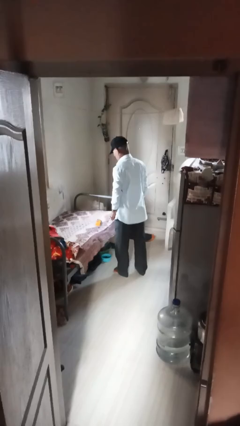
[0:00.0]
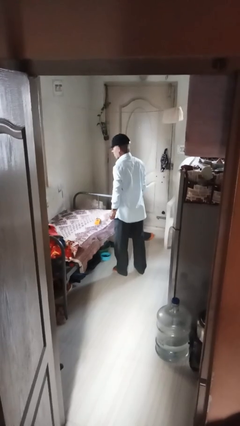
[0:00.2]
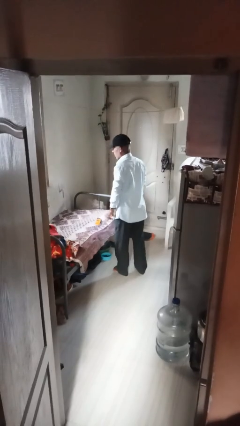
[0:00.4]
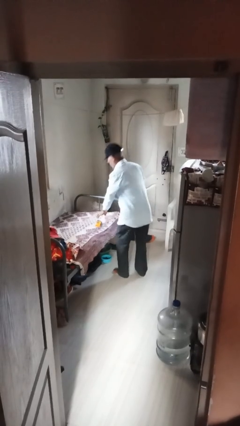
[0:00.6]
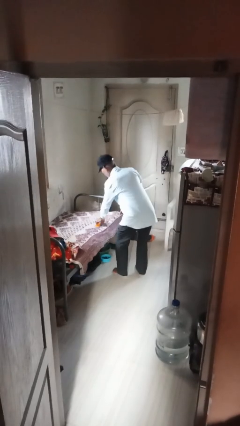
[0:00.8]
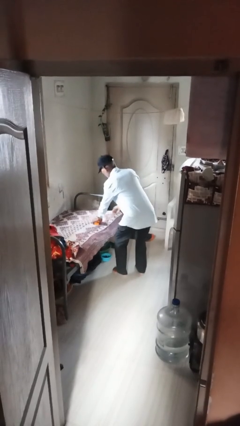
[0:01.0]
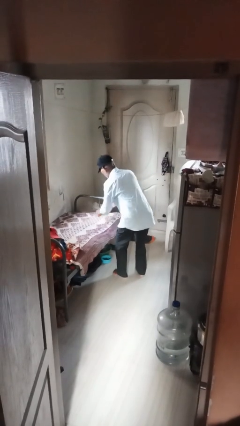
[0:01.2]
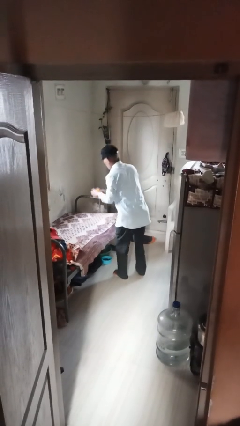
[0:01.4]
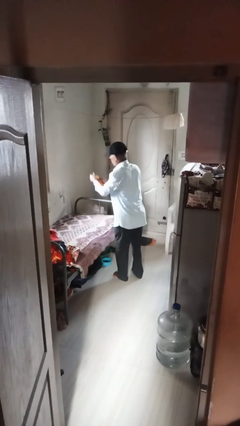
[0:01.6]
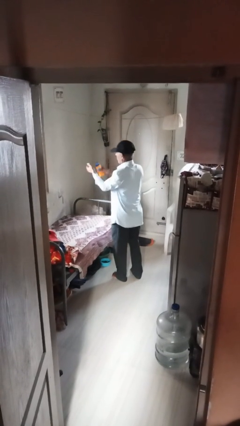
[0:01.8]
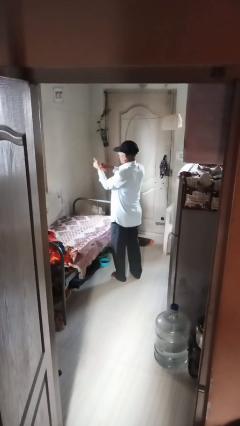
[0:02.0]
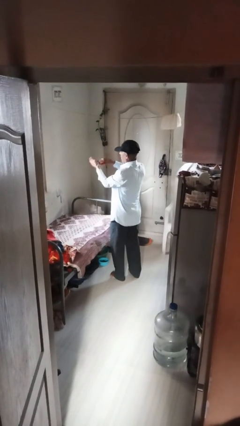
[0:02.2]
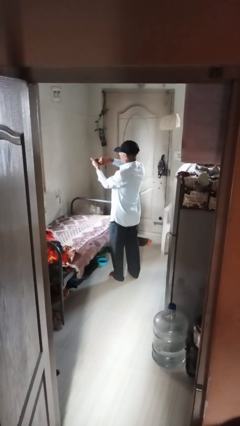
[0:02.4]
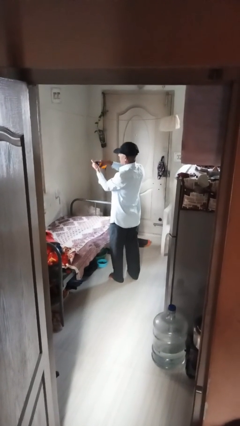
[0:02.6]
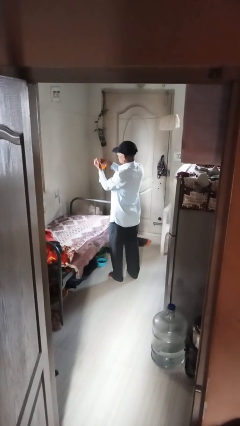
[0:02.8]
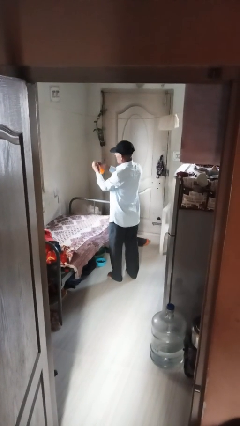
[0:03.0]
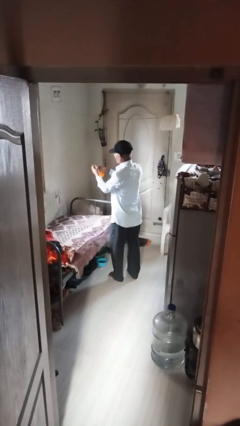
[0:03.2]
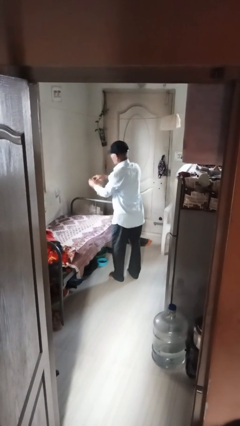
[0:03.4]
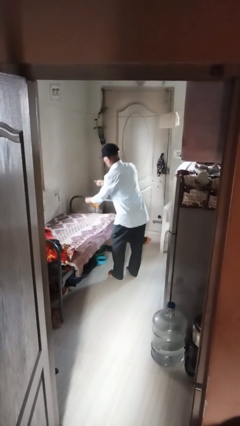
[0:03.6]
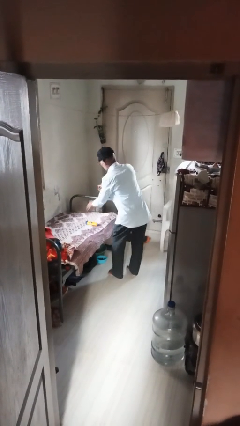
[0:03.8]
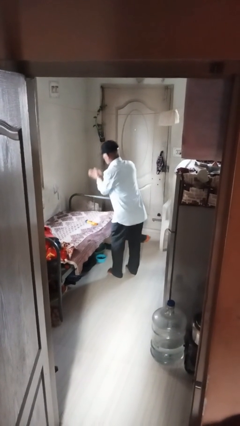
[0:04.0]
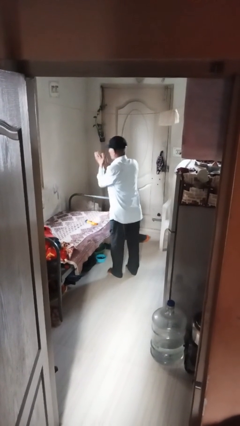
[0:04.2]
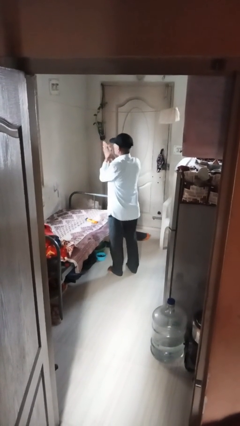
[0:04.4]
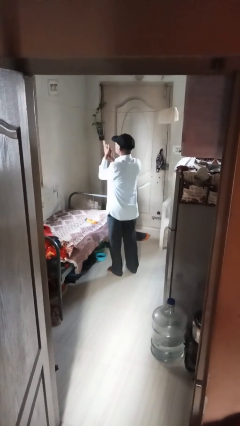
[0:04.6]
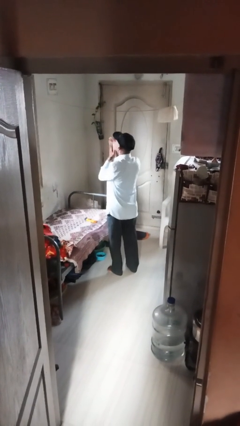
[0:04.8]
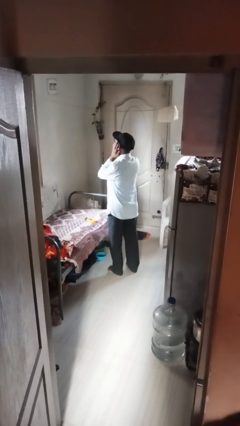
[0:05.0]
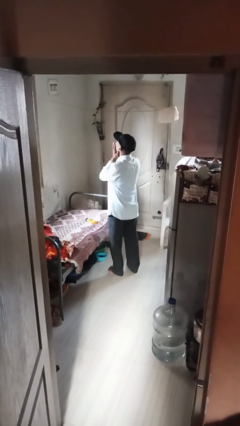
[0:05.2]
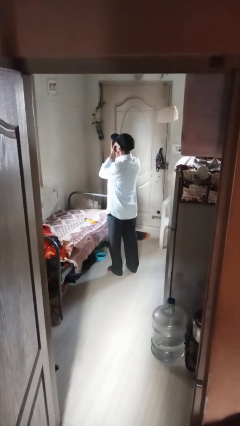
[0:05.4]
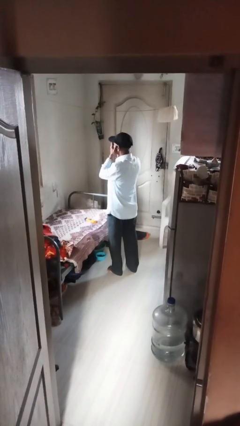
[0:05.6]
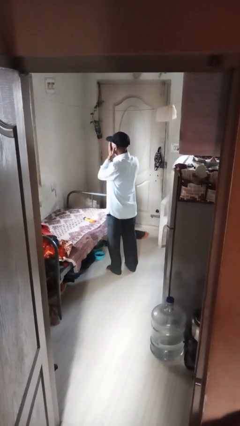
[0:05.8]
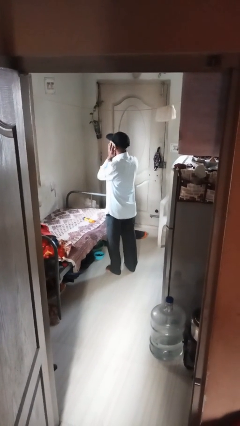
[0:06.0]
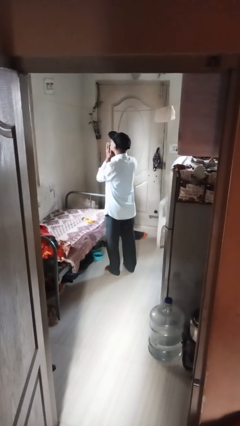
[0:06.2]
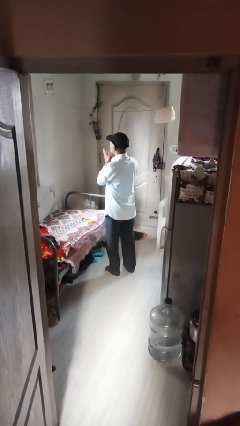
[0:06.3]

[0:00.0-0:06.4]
person applies sunscreen

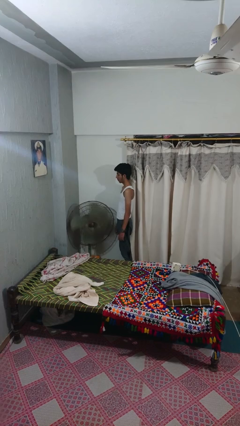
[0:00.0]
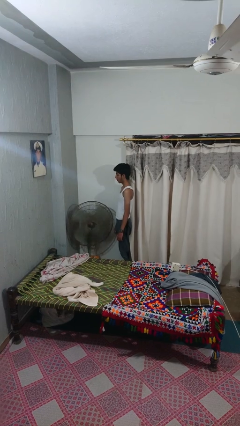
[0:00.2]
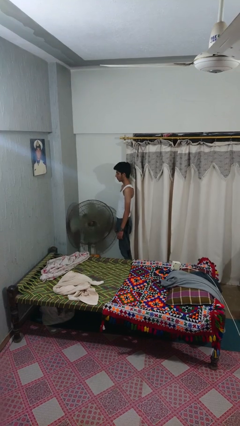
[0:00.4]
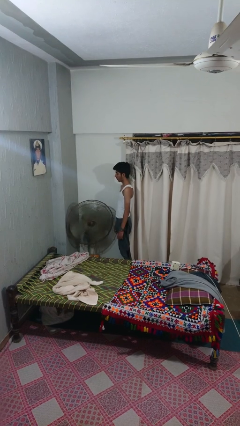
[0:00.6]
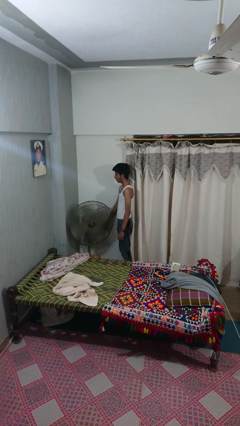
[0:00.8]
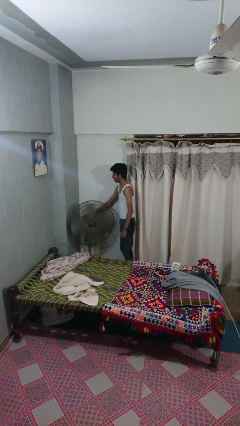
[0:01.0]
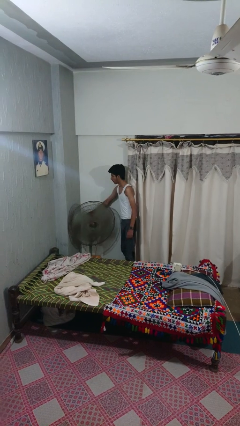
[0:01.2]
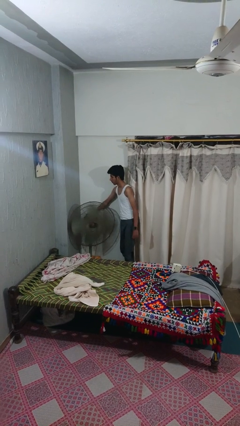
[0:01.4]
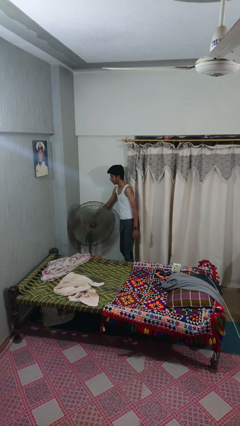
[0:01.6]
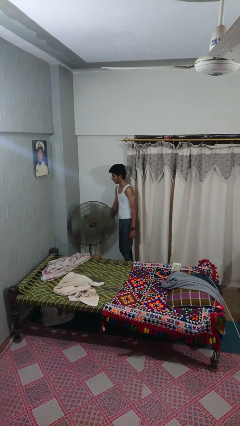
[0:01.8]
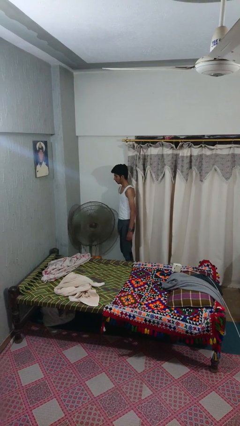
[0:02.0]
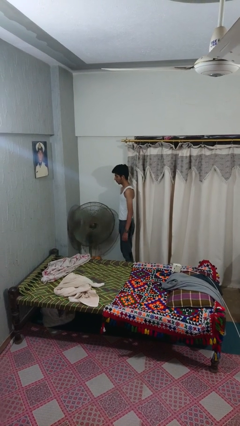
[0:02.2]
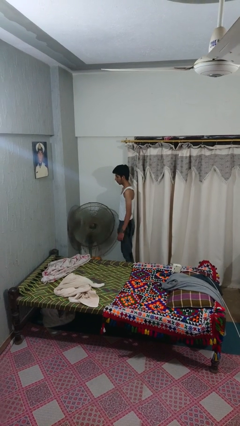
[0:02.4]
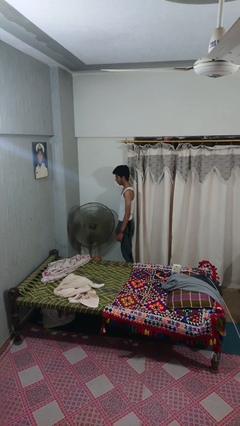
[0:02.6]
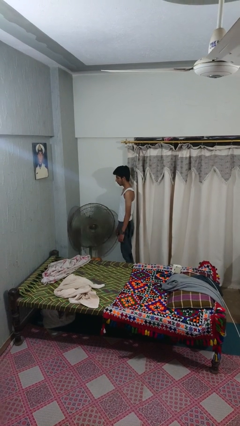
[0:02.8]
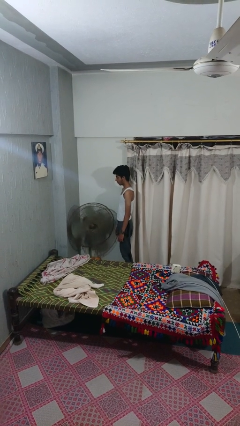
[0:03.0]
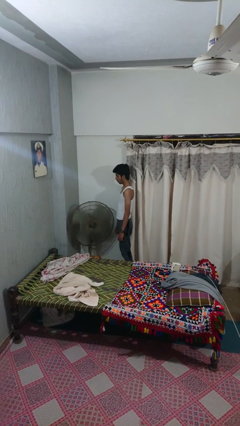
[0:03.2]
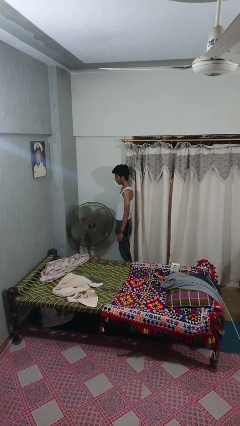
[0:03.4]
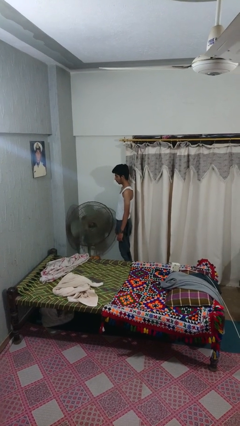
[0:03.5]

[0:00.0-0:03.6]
person turns off fan

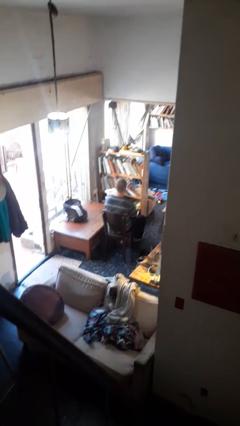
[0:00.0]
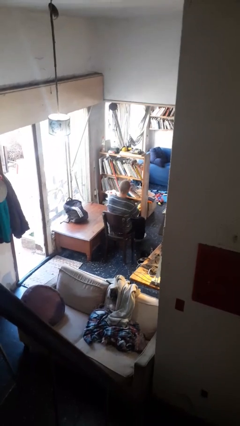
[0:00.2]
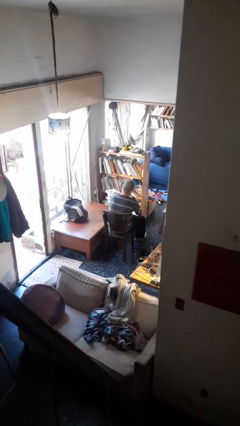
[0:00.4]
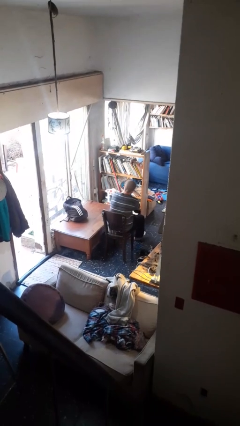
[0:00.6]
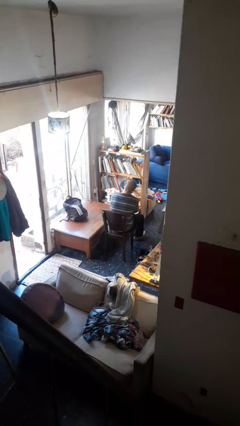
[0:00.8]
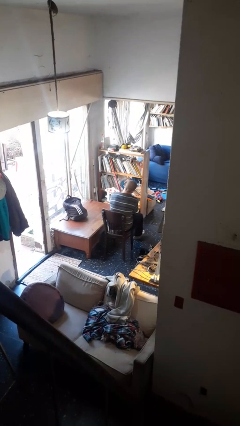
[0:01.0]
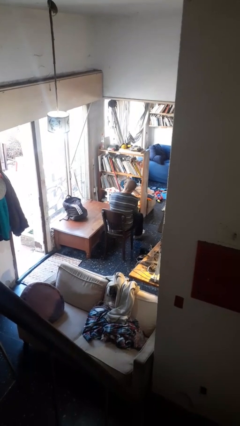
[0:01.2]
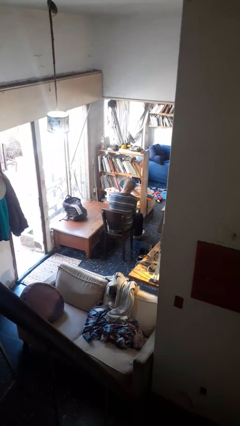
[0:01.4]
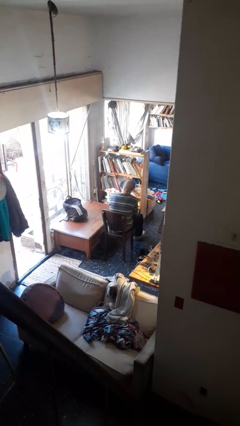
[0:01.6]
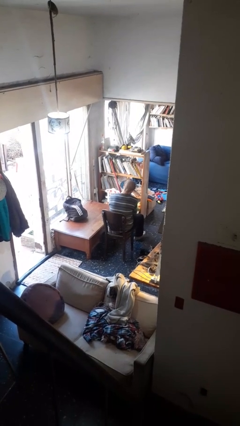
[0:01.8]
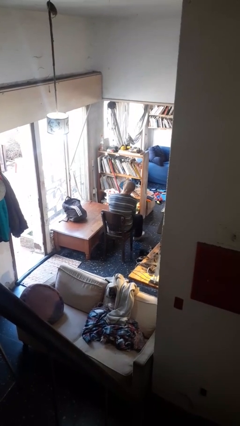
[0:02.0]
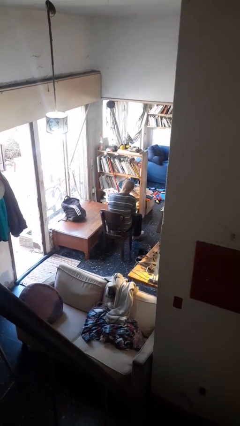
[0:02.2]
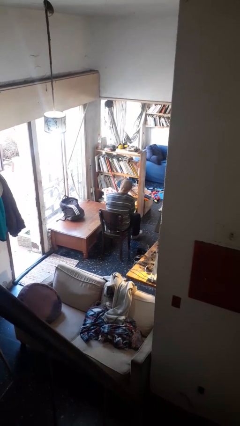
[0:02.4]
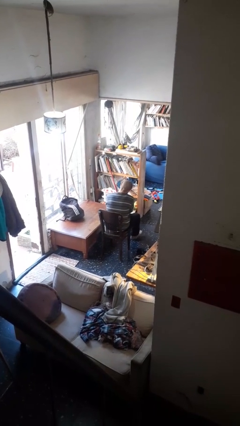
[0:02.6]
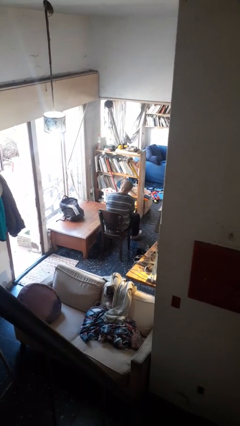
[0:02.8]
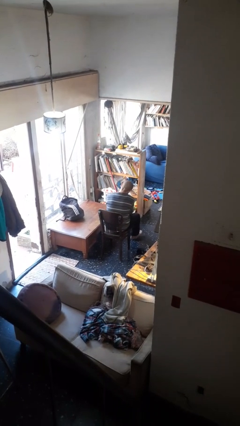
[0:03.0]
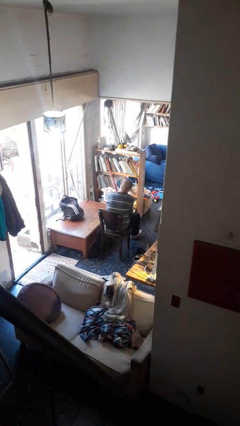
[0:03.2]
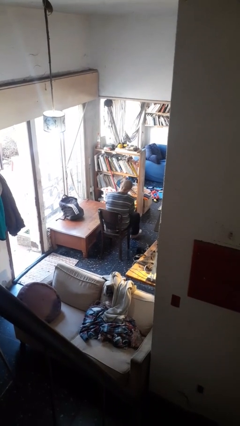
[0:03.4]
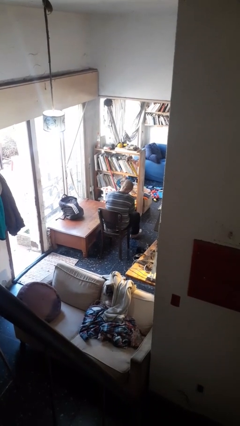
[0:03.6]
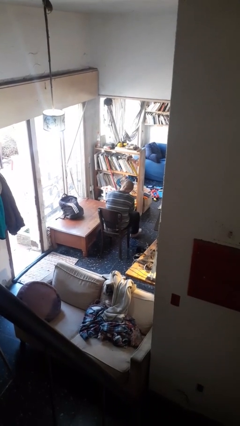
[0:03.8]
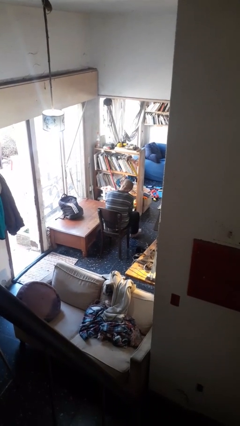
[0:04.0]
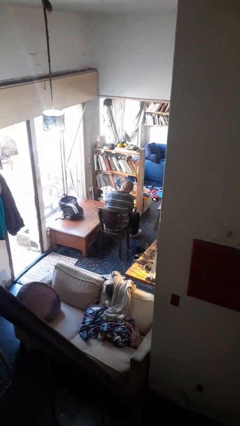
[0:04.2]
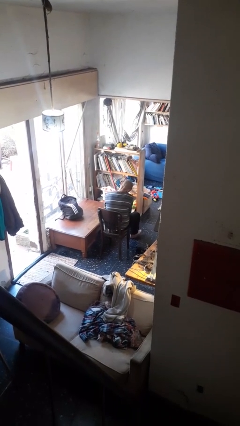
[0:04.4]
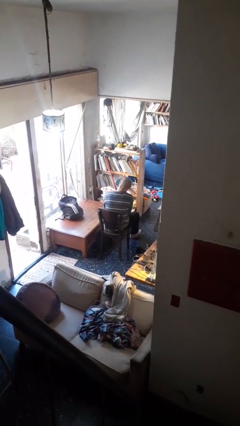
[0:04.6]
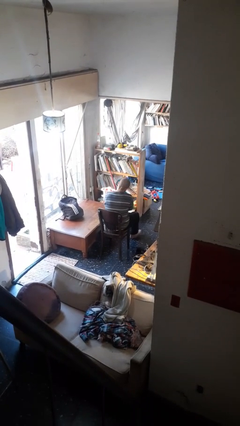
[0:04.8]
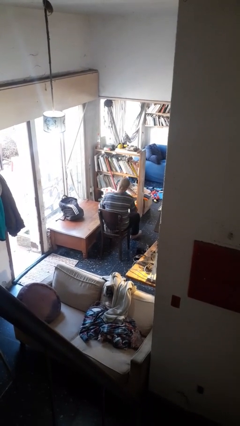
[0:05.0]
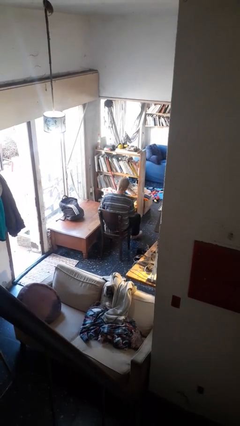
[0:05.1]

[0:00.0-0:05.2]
person puts on socks

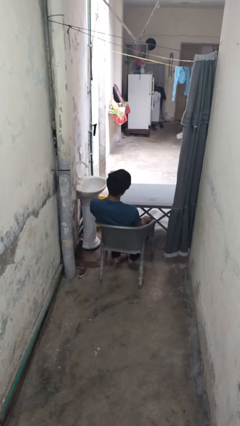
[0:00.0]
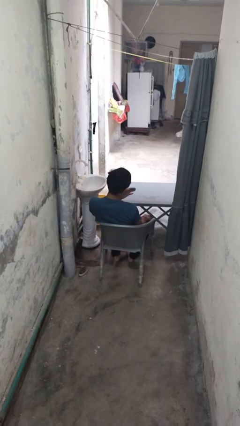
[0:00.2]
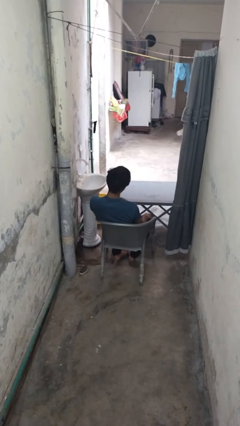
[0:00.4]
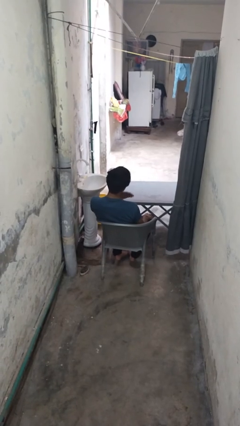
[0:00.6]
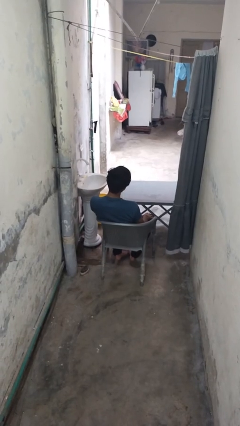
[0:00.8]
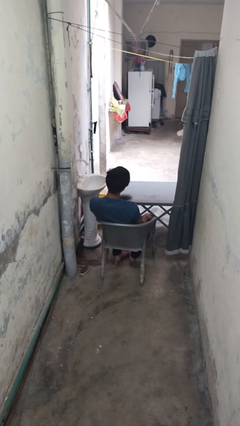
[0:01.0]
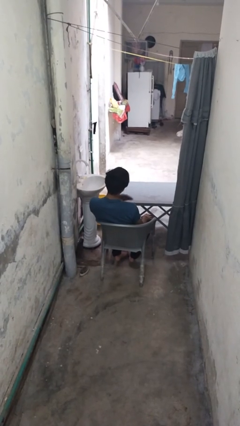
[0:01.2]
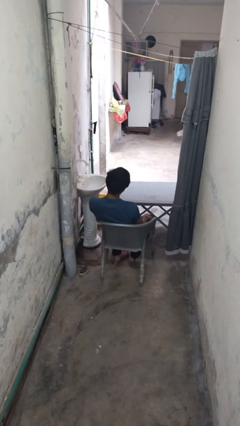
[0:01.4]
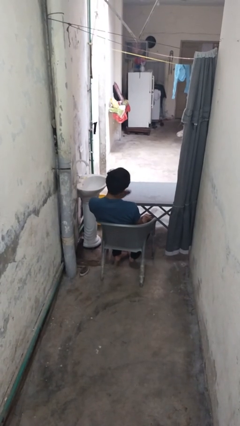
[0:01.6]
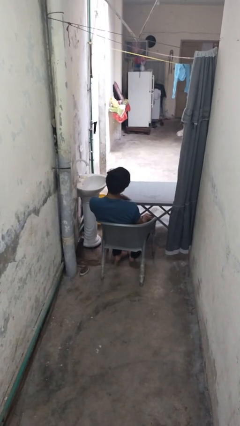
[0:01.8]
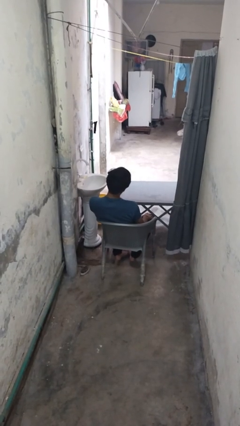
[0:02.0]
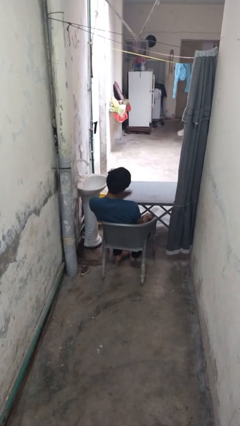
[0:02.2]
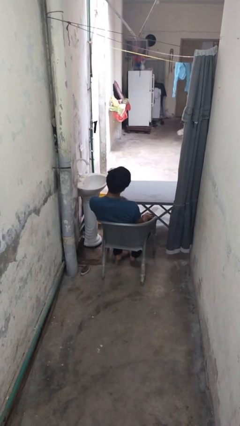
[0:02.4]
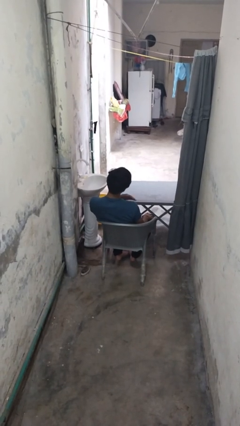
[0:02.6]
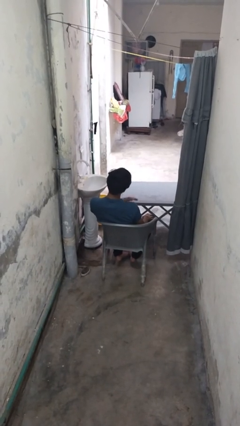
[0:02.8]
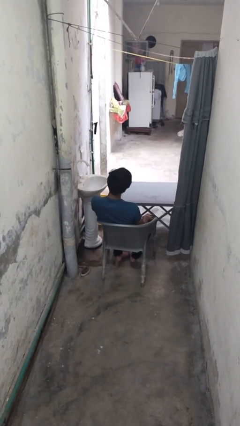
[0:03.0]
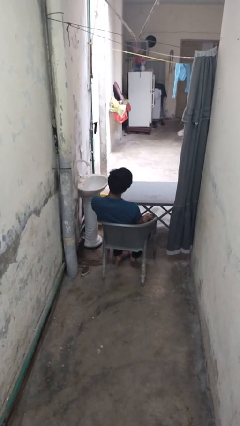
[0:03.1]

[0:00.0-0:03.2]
person drums on chest
